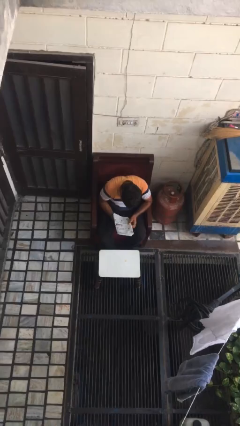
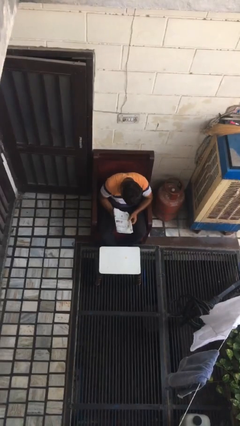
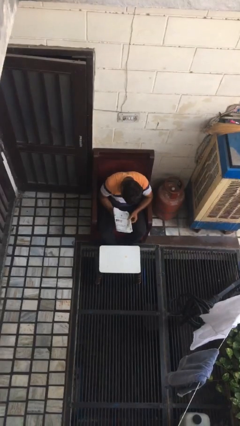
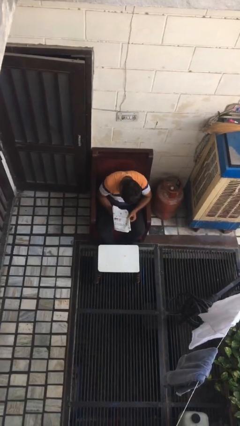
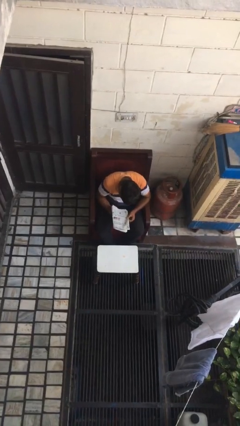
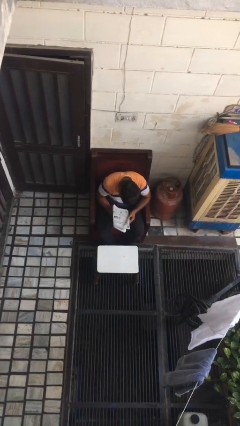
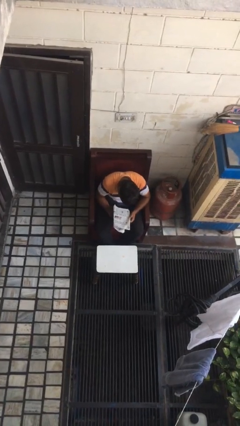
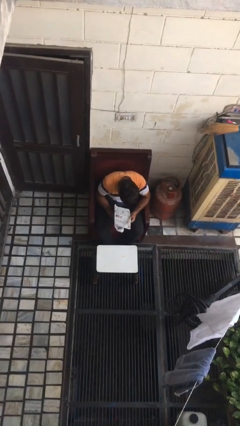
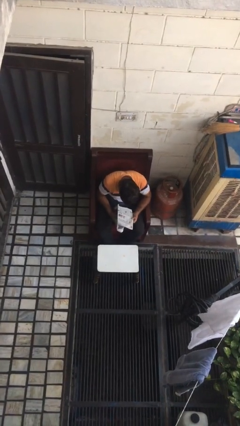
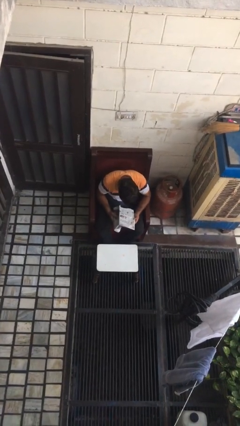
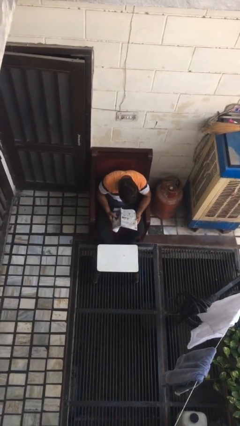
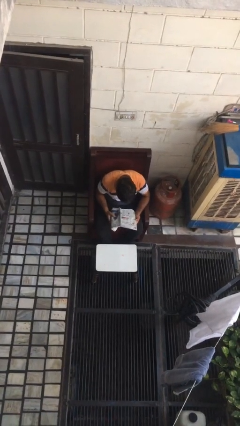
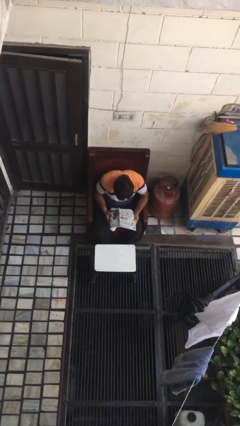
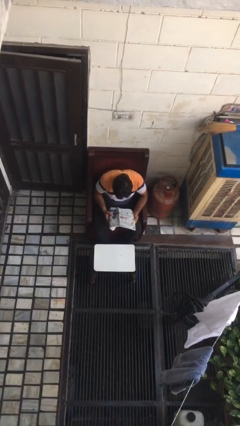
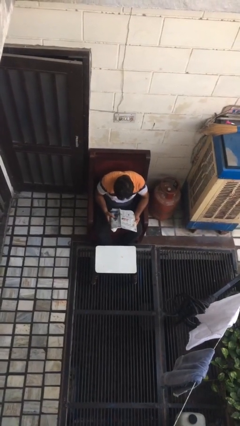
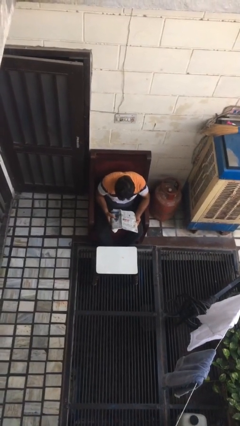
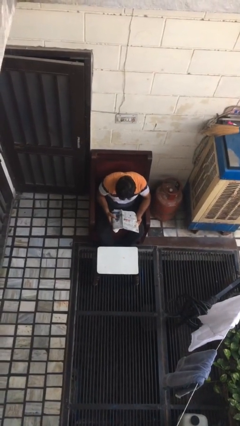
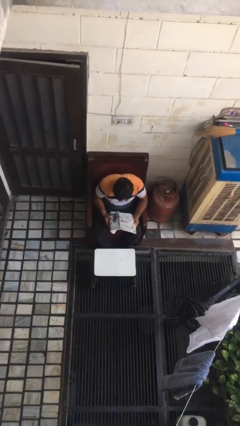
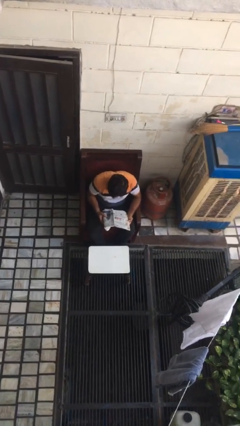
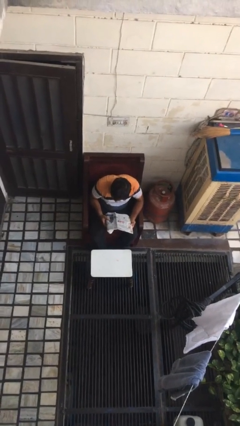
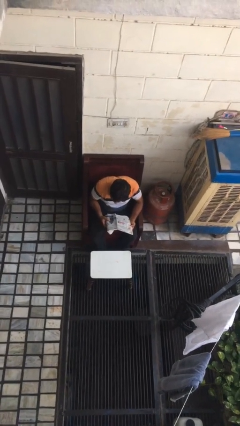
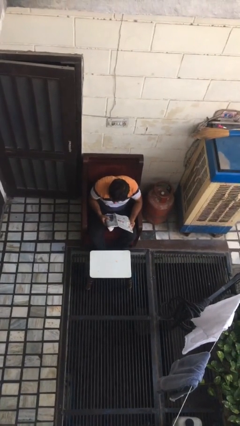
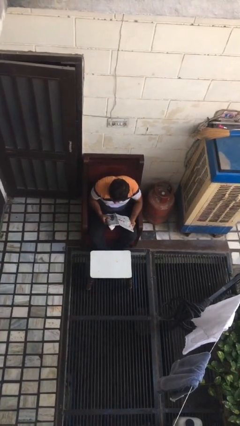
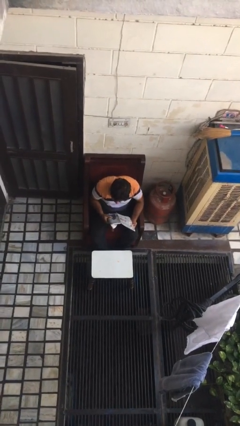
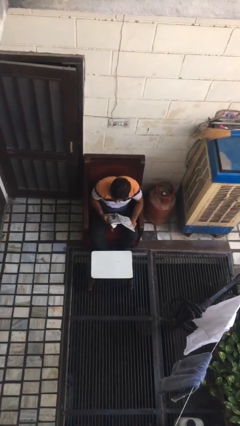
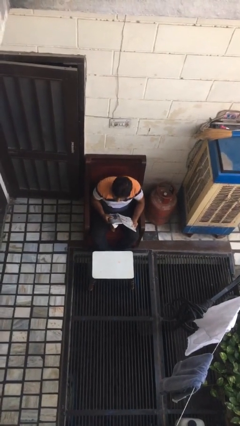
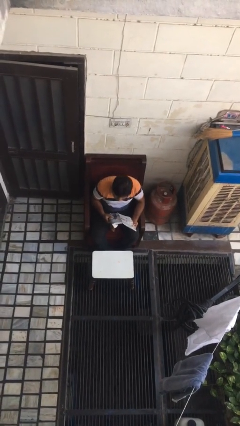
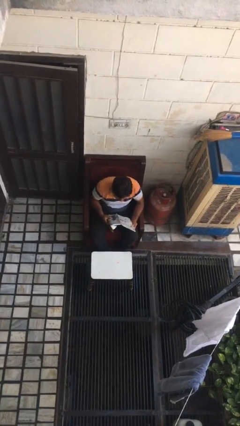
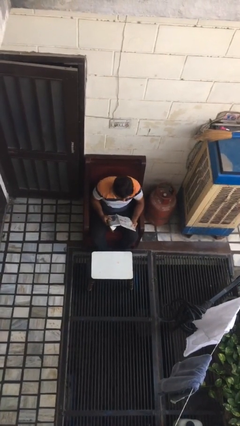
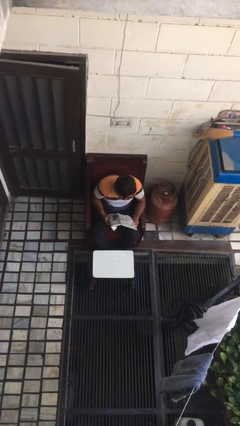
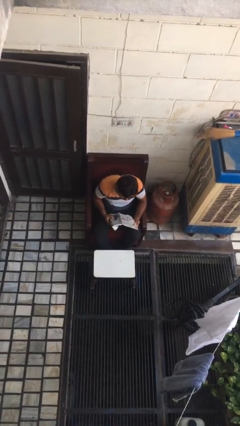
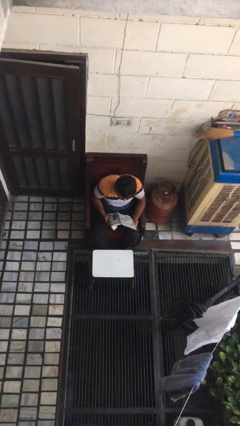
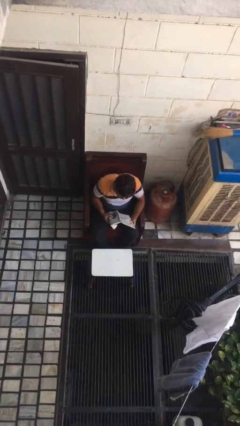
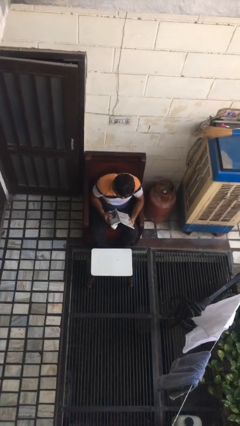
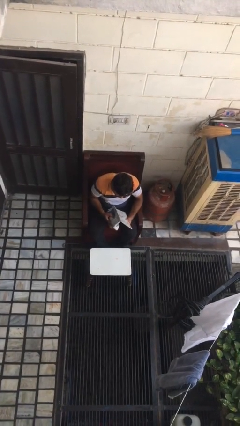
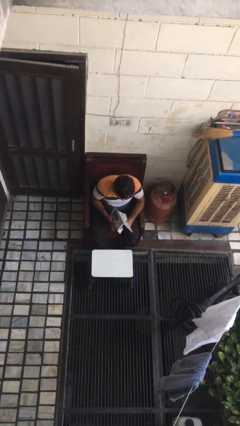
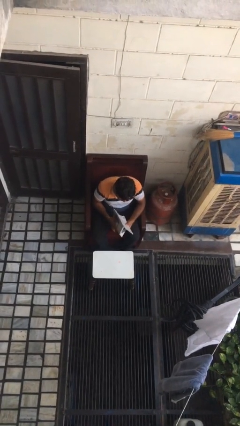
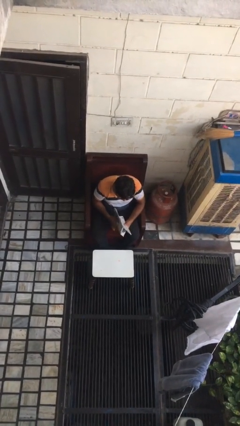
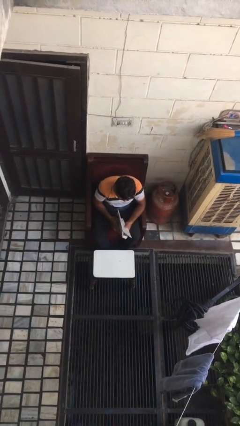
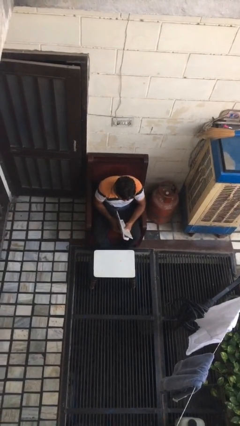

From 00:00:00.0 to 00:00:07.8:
person reads document

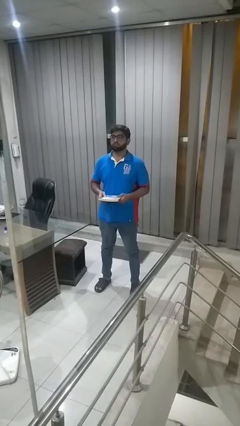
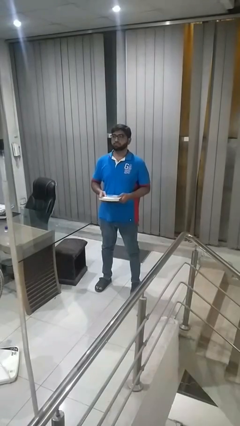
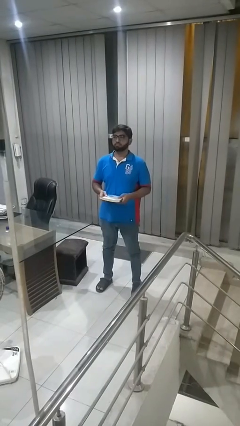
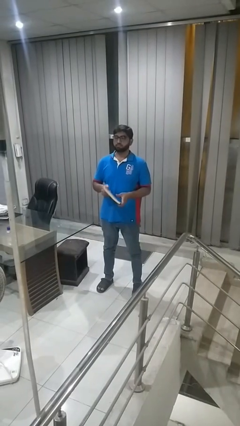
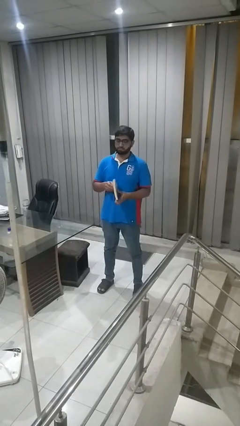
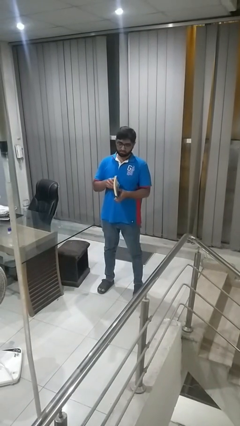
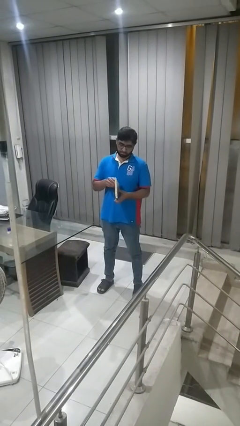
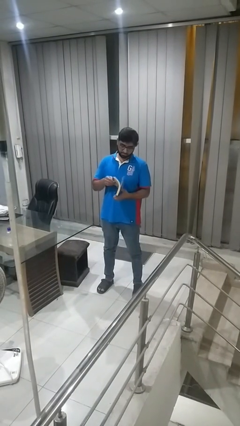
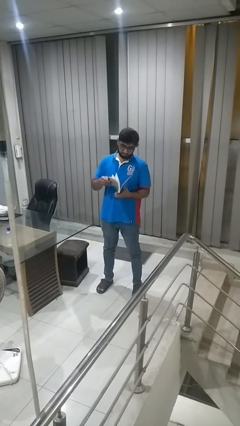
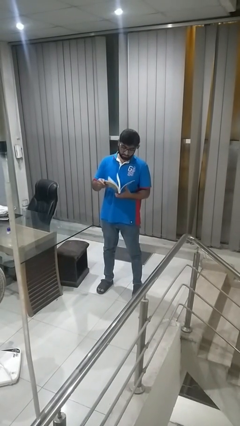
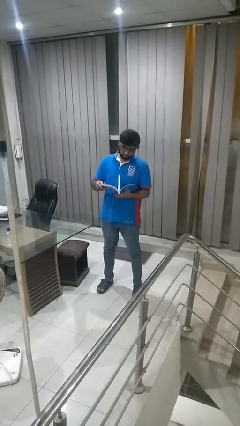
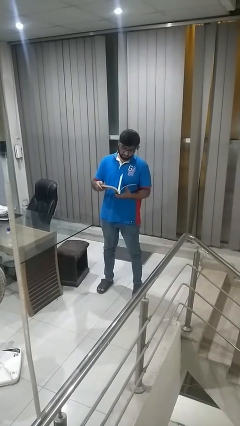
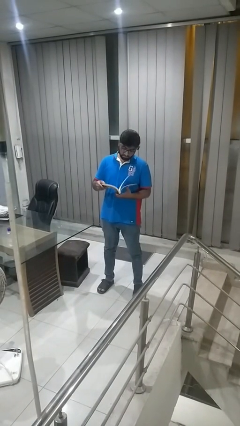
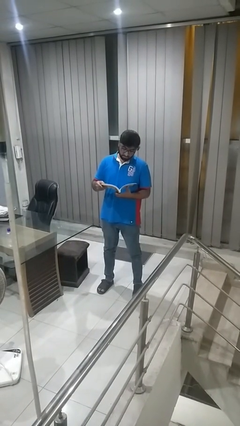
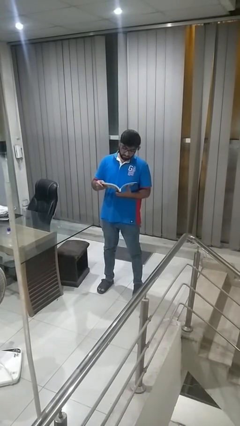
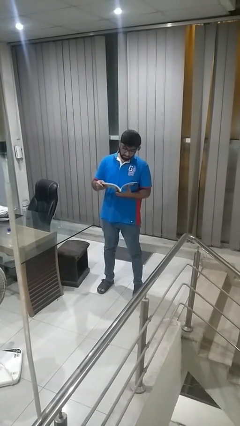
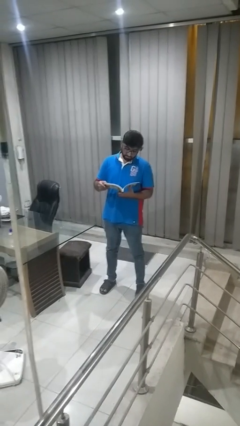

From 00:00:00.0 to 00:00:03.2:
person reads book

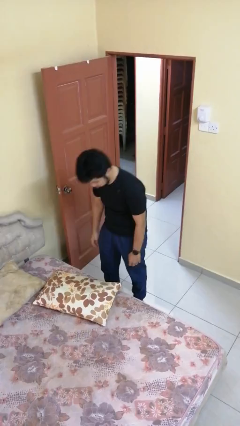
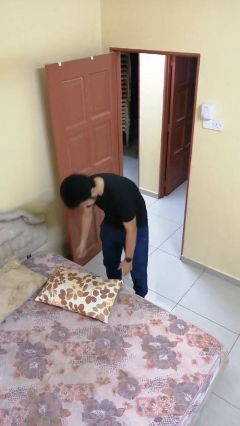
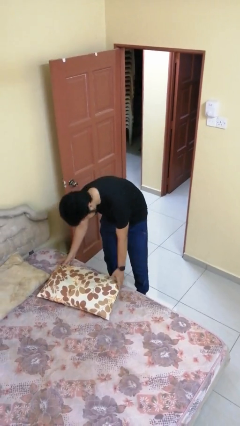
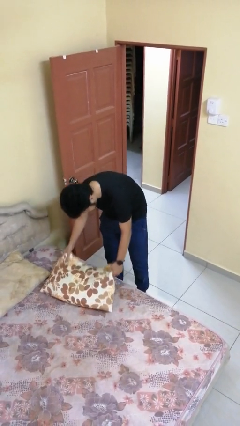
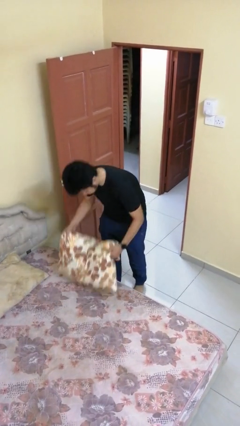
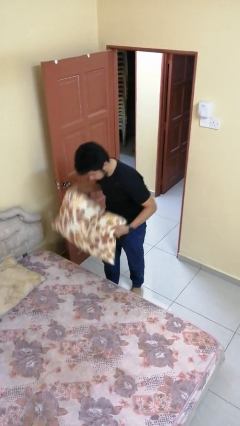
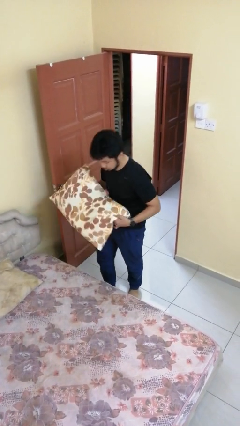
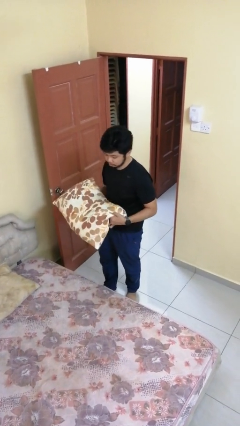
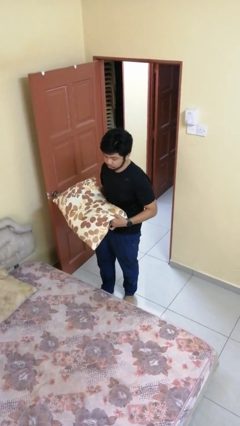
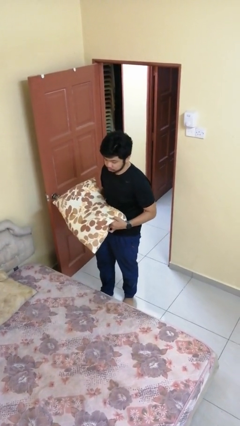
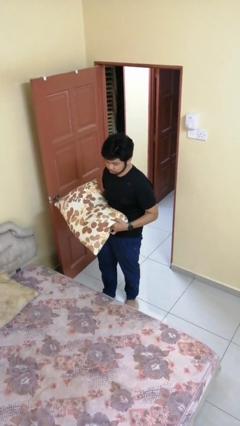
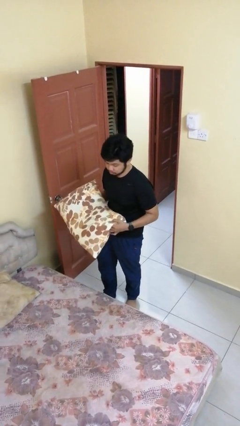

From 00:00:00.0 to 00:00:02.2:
person picks up object from bed

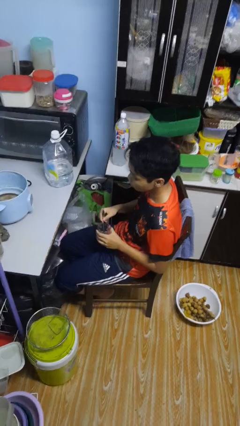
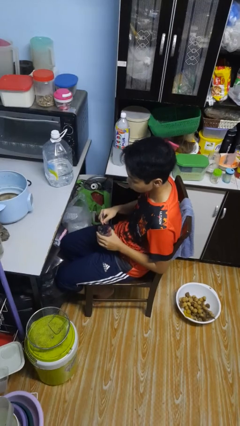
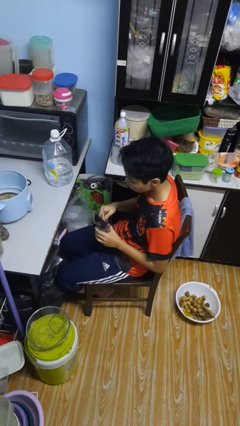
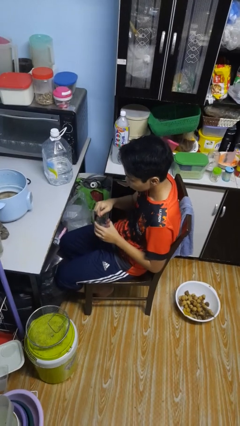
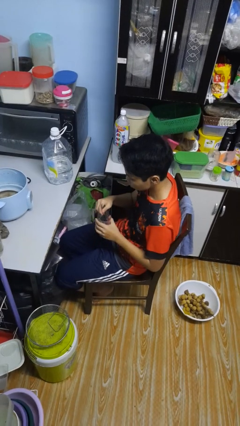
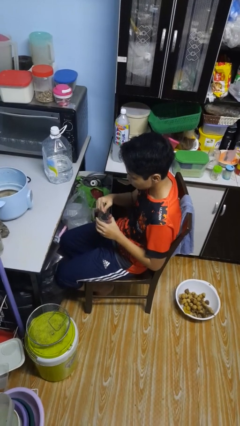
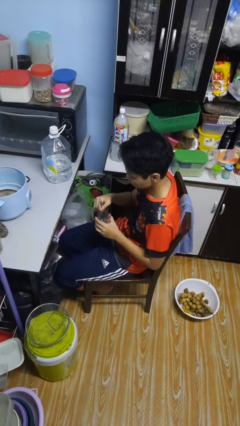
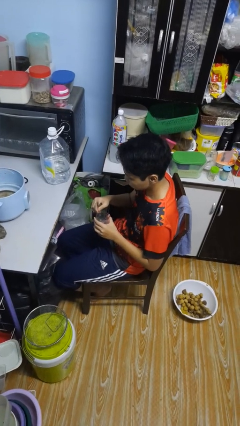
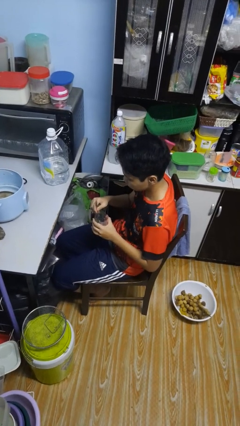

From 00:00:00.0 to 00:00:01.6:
person stirs mug

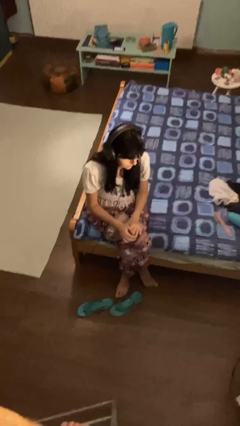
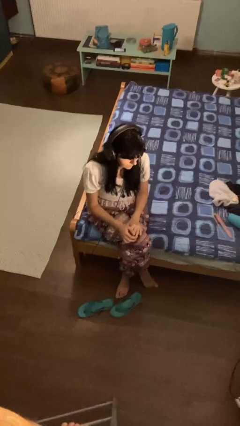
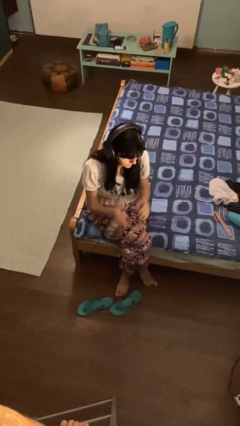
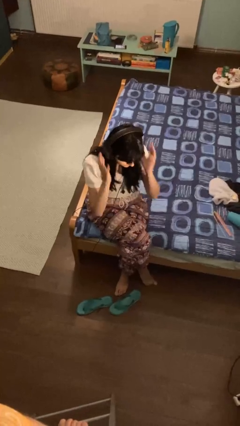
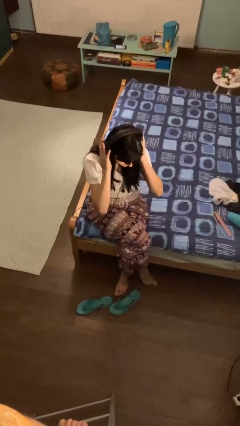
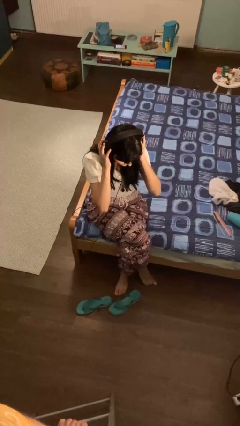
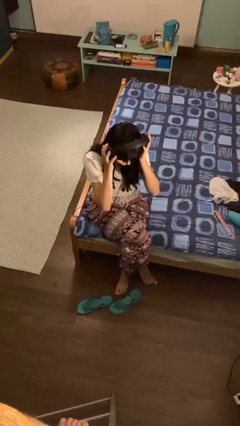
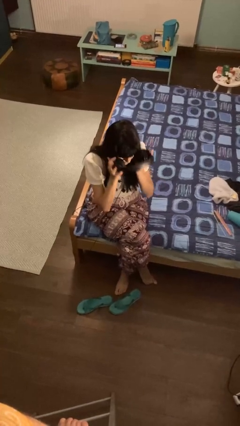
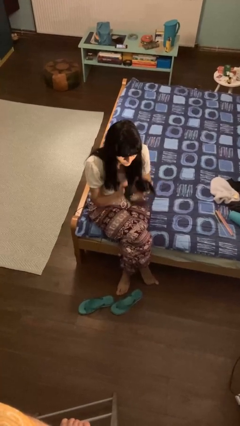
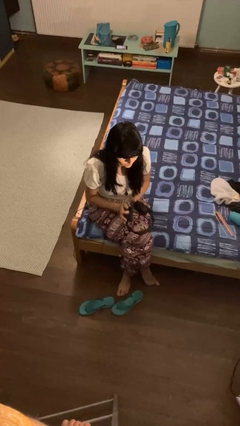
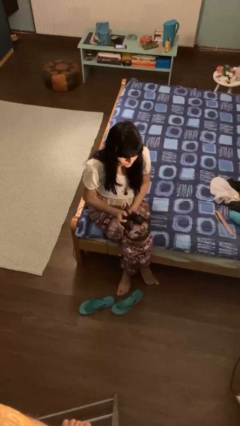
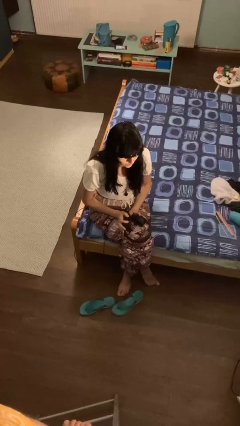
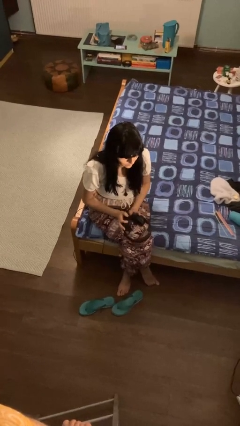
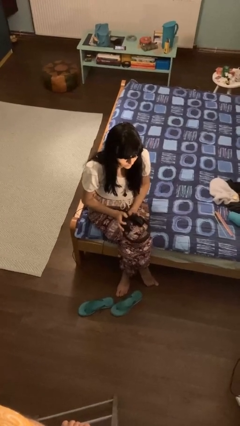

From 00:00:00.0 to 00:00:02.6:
person takes off headphones

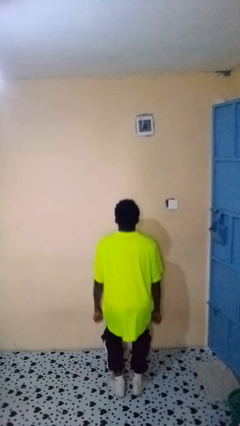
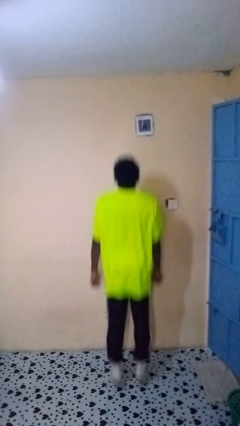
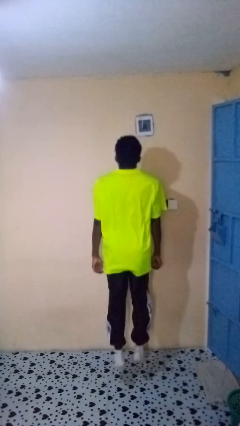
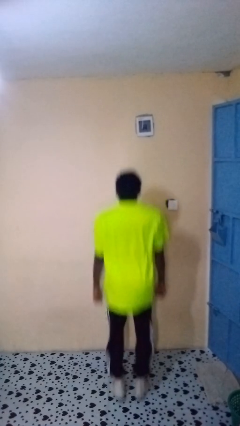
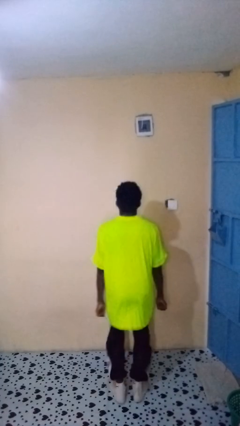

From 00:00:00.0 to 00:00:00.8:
person jumps
